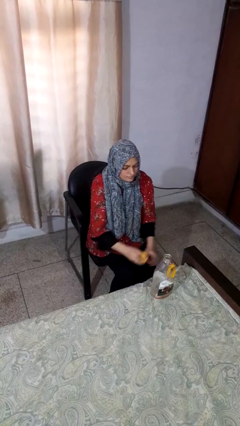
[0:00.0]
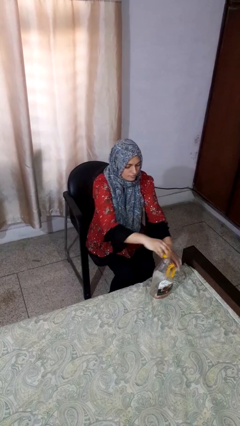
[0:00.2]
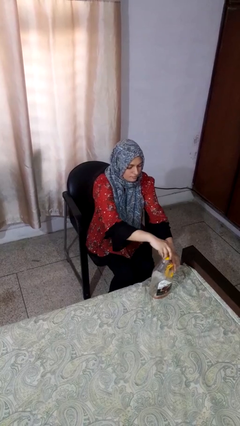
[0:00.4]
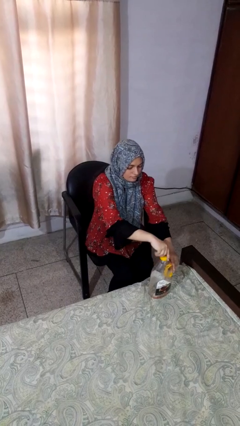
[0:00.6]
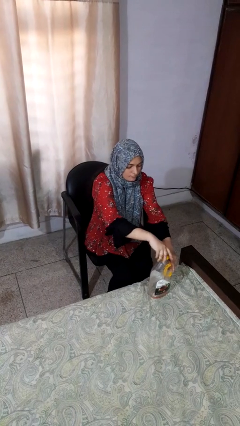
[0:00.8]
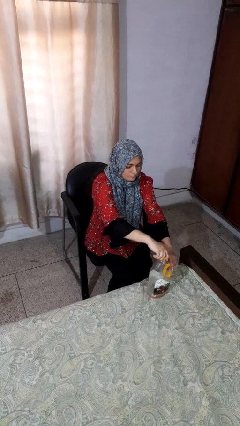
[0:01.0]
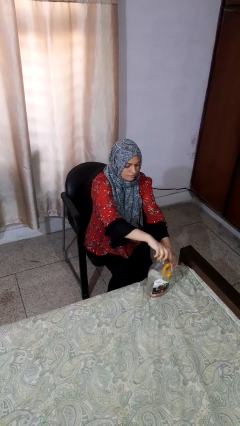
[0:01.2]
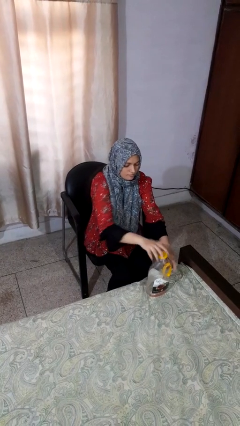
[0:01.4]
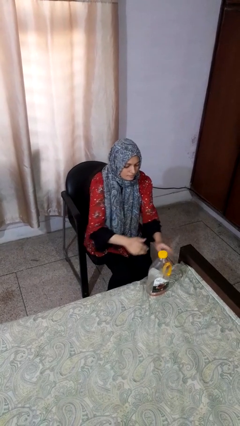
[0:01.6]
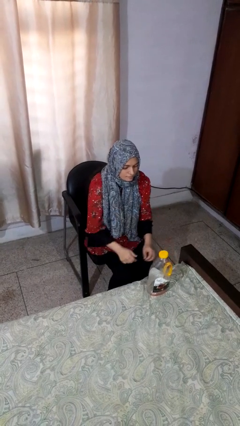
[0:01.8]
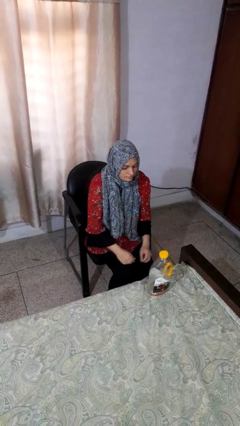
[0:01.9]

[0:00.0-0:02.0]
person screws lid to bottle

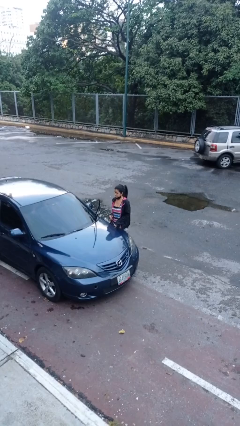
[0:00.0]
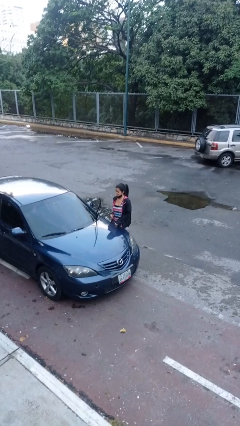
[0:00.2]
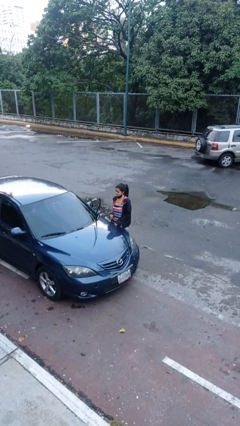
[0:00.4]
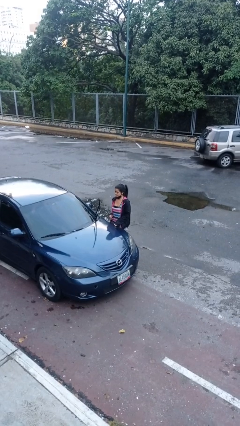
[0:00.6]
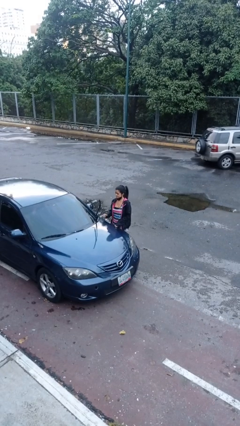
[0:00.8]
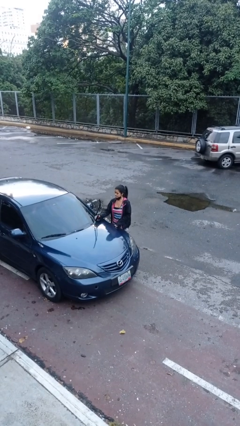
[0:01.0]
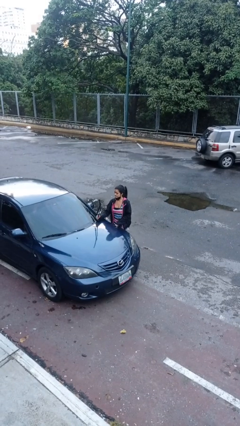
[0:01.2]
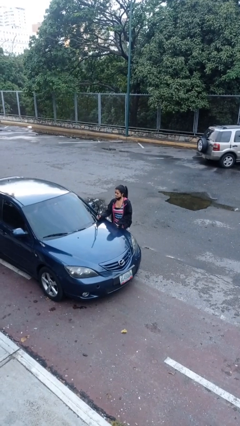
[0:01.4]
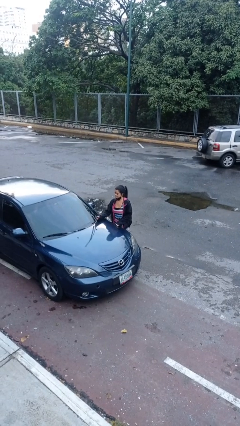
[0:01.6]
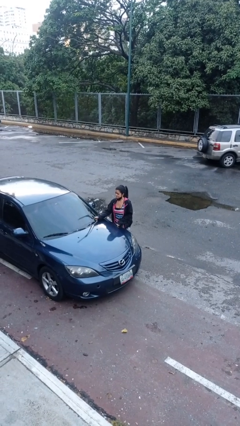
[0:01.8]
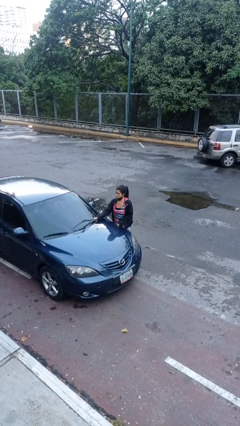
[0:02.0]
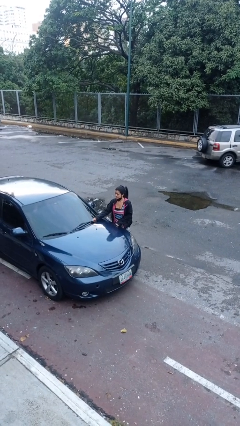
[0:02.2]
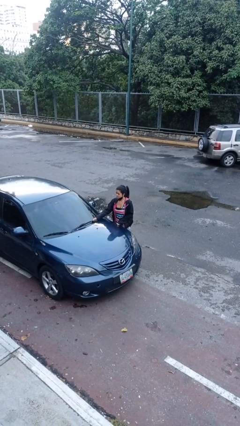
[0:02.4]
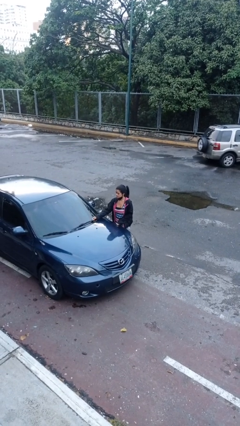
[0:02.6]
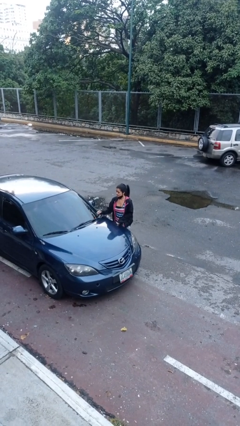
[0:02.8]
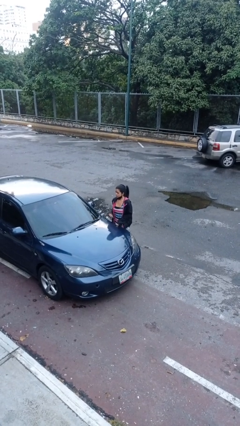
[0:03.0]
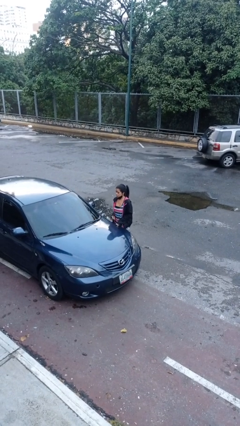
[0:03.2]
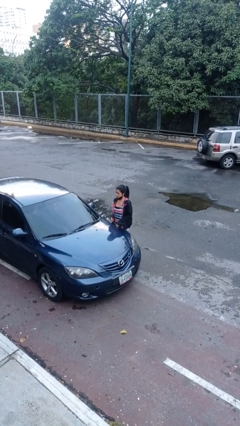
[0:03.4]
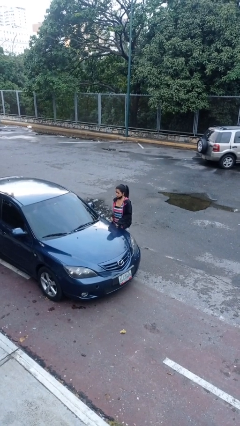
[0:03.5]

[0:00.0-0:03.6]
person flips down car wipers

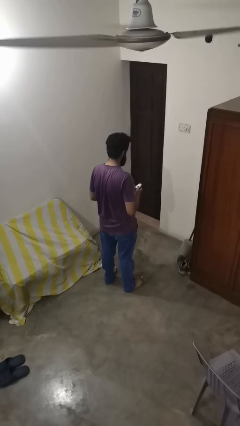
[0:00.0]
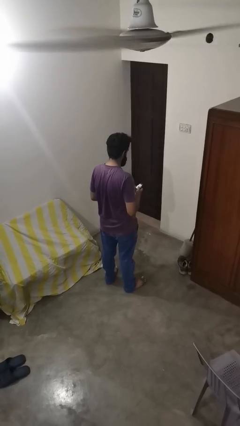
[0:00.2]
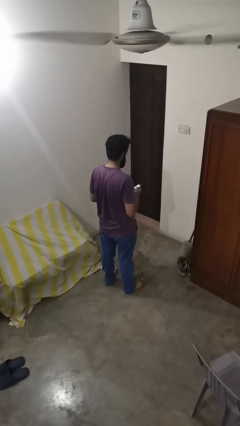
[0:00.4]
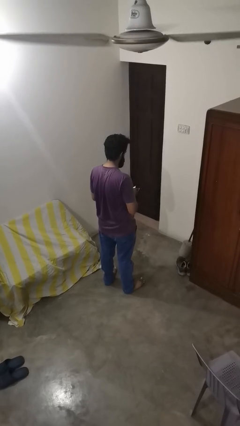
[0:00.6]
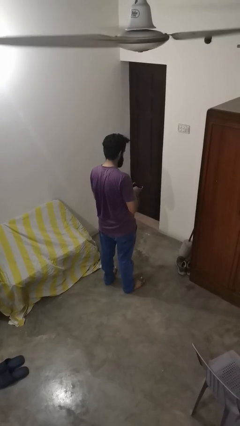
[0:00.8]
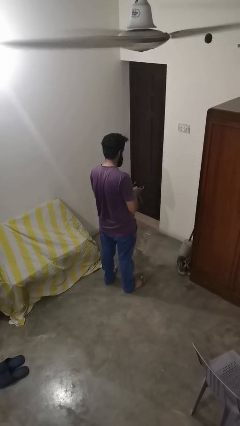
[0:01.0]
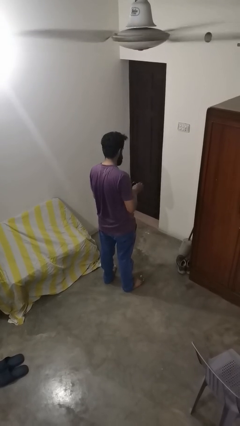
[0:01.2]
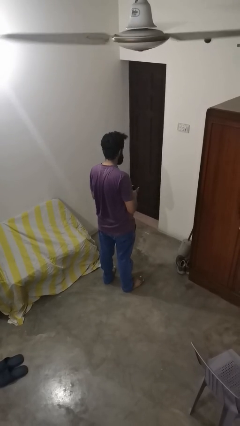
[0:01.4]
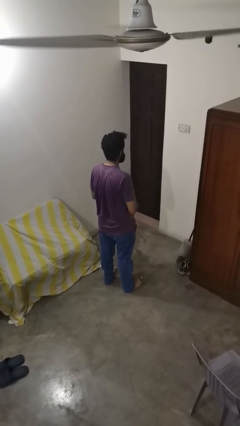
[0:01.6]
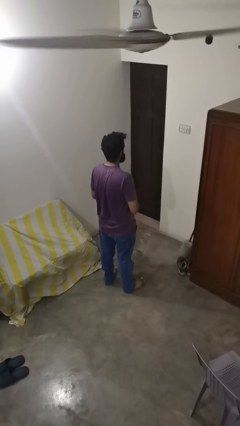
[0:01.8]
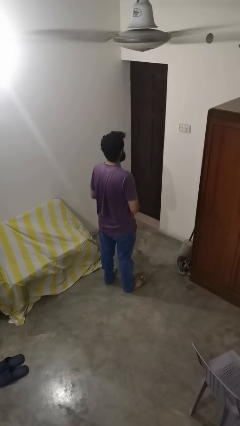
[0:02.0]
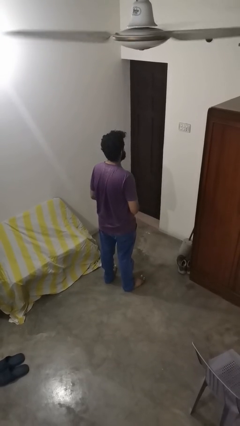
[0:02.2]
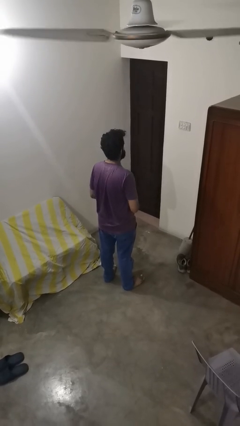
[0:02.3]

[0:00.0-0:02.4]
person puts object into purse

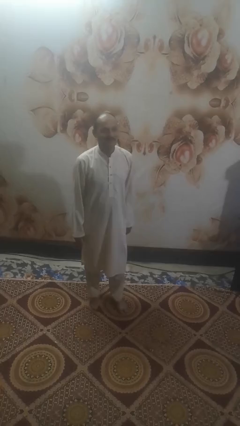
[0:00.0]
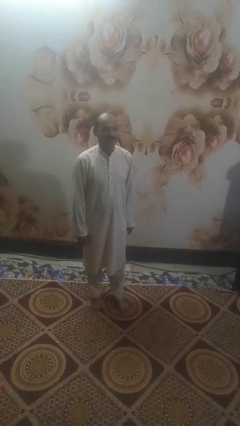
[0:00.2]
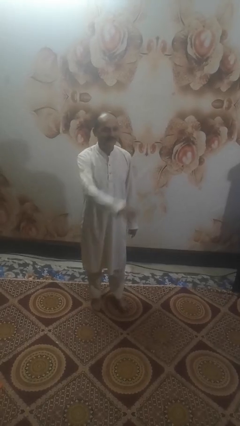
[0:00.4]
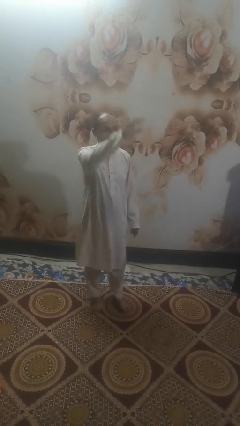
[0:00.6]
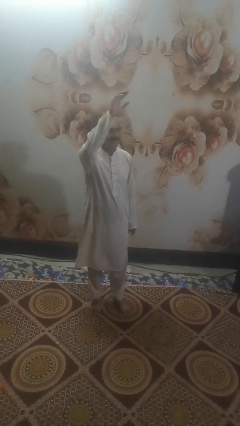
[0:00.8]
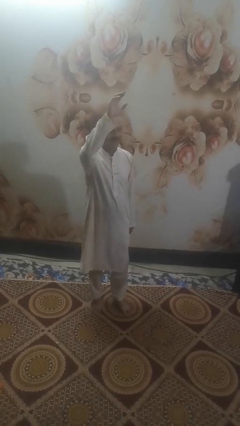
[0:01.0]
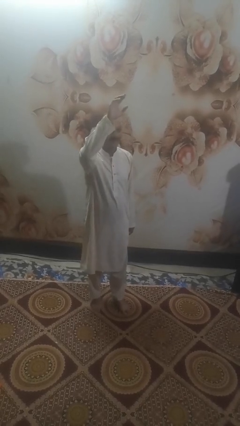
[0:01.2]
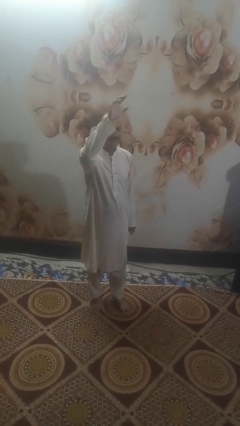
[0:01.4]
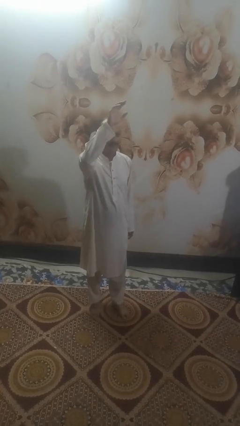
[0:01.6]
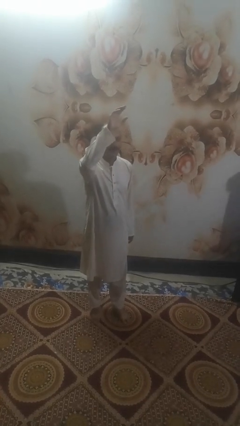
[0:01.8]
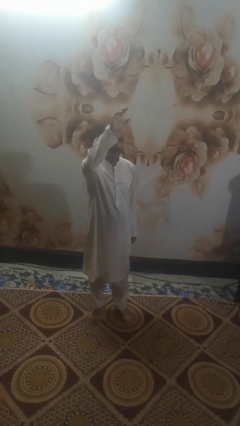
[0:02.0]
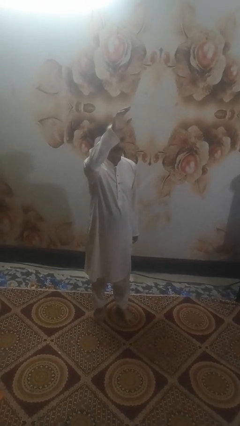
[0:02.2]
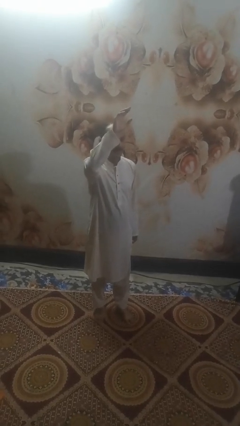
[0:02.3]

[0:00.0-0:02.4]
person gestures swipe up

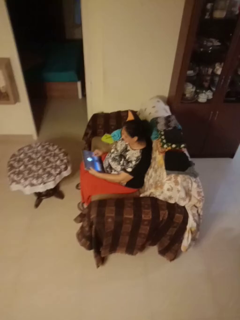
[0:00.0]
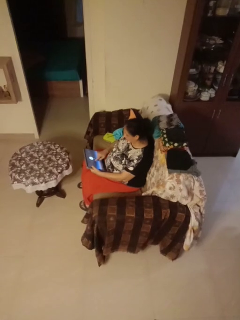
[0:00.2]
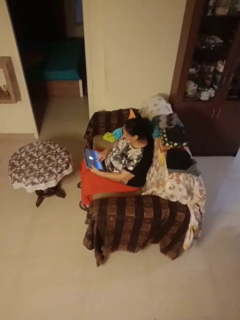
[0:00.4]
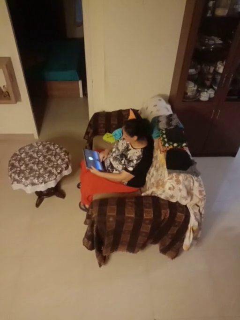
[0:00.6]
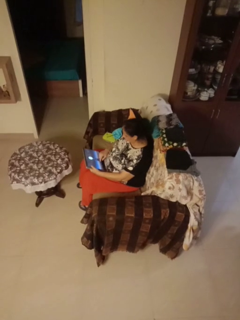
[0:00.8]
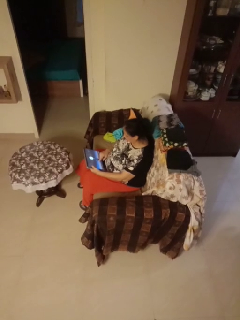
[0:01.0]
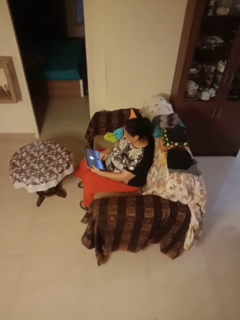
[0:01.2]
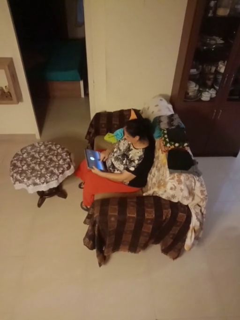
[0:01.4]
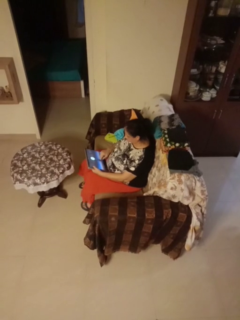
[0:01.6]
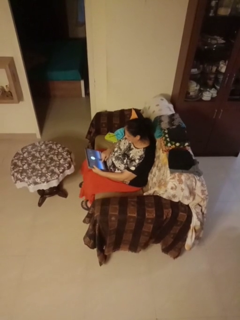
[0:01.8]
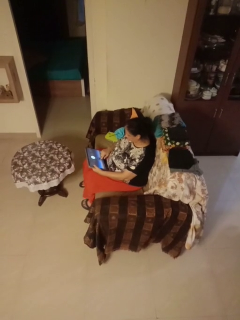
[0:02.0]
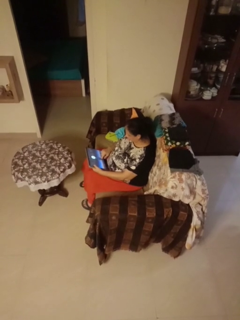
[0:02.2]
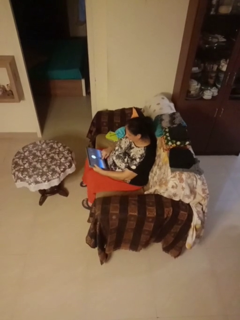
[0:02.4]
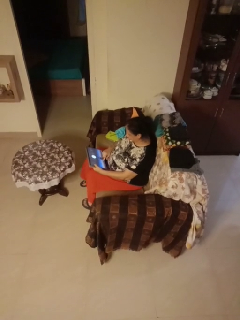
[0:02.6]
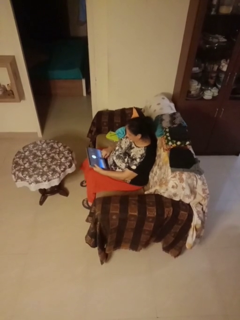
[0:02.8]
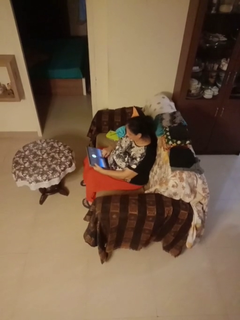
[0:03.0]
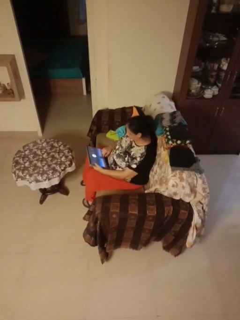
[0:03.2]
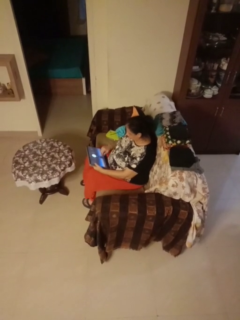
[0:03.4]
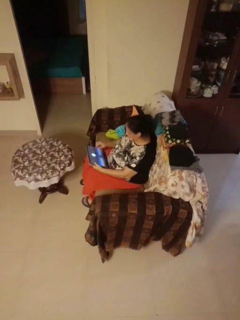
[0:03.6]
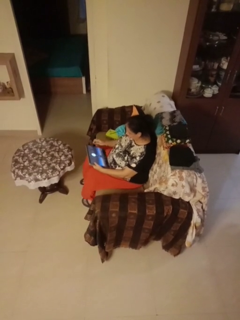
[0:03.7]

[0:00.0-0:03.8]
person interacts with tablet

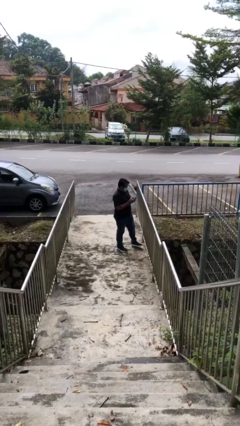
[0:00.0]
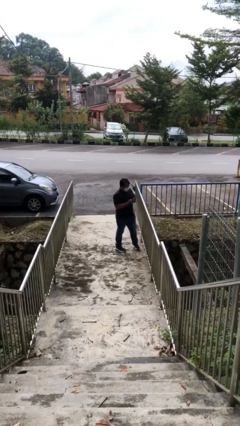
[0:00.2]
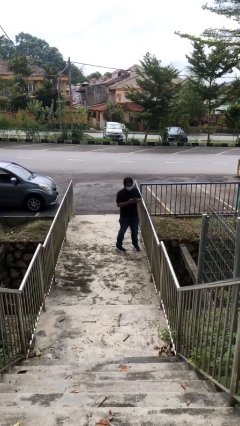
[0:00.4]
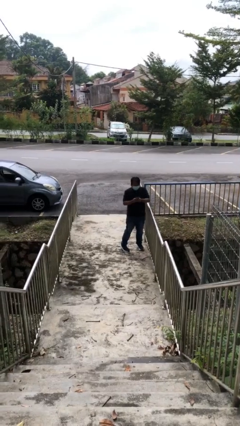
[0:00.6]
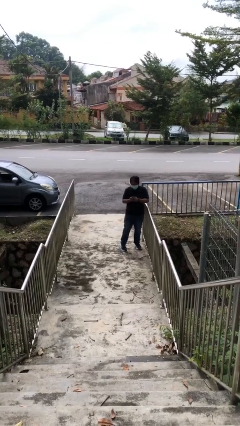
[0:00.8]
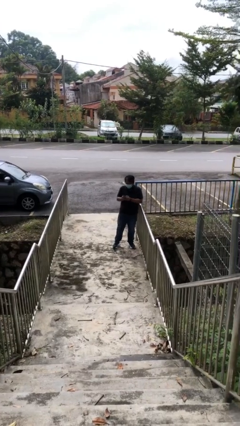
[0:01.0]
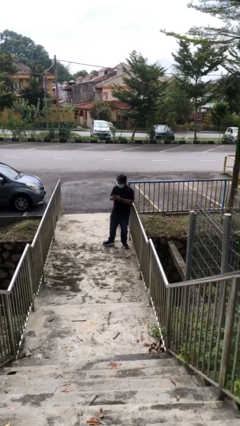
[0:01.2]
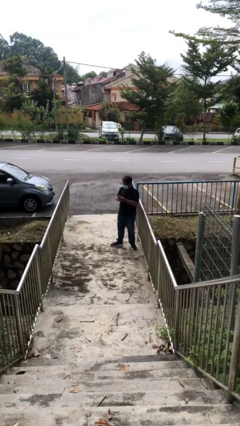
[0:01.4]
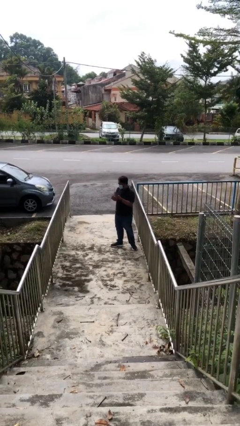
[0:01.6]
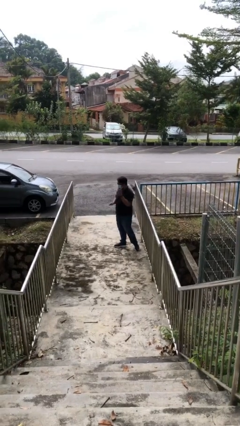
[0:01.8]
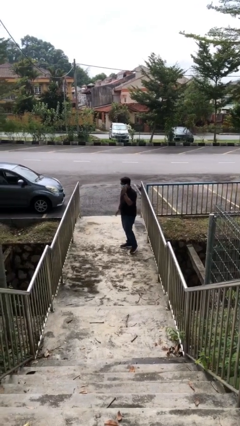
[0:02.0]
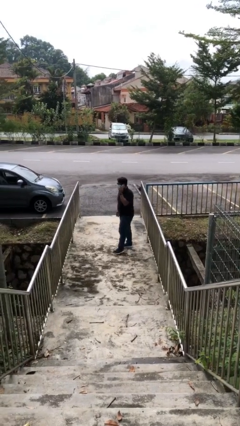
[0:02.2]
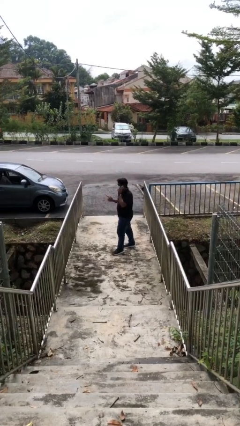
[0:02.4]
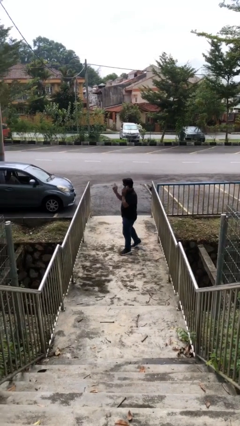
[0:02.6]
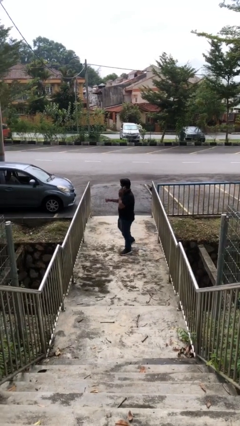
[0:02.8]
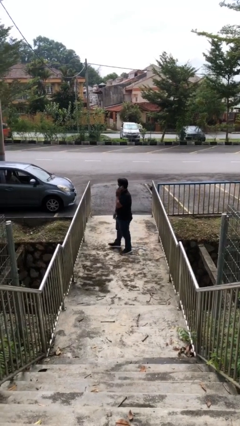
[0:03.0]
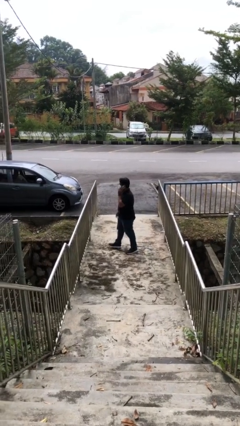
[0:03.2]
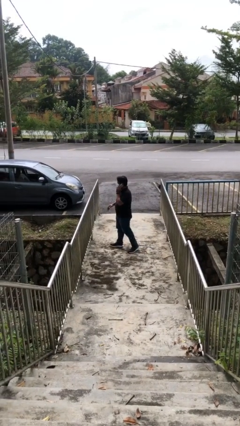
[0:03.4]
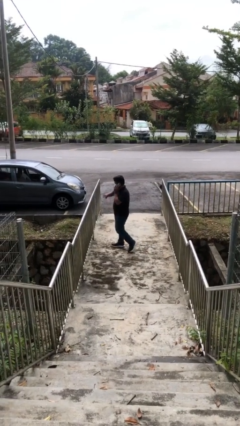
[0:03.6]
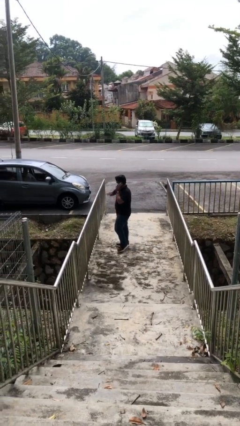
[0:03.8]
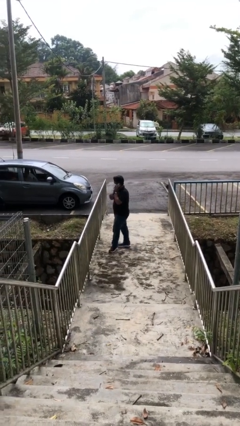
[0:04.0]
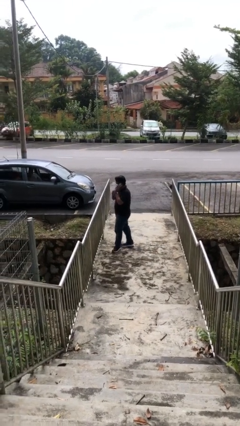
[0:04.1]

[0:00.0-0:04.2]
person talks on phone
